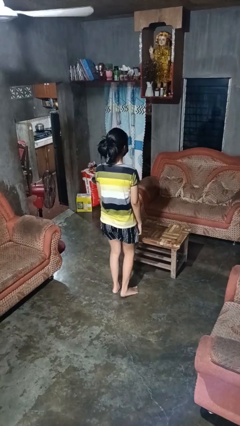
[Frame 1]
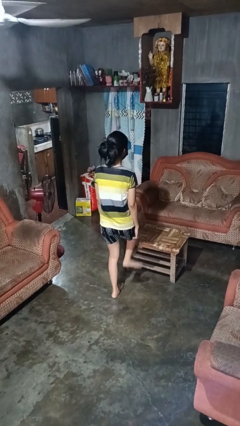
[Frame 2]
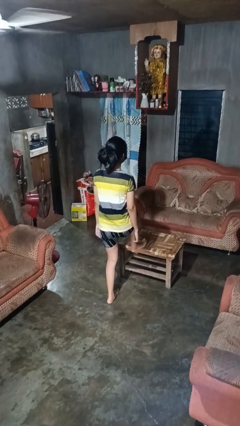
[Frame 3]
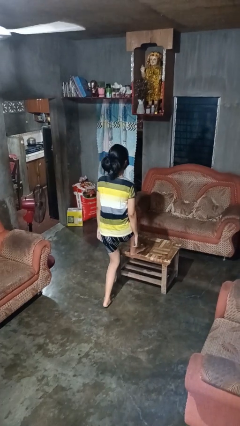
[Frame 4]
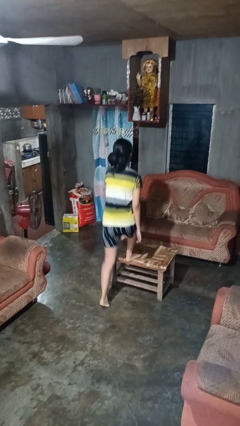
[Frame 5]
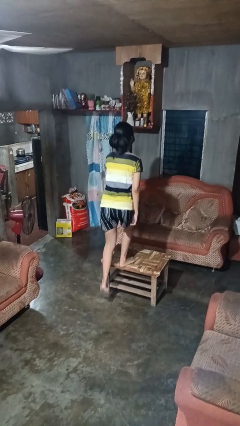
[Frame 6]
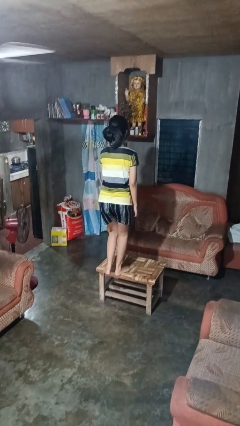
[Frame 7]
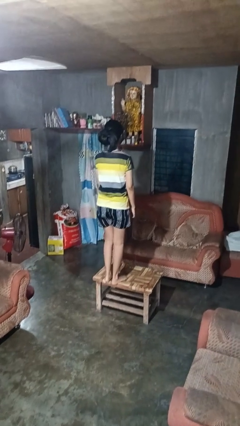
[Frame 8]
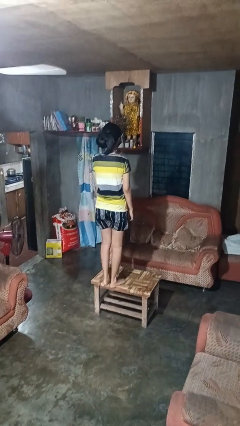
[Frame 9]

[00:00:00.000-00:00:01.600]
person climbs on table

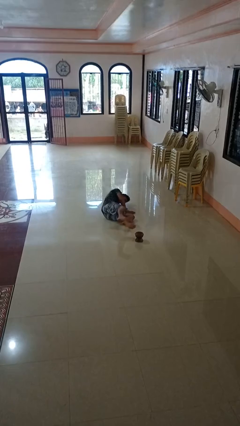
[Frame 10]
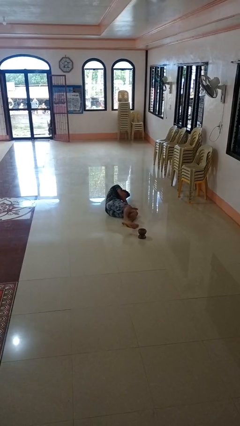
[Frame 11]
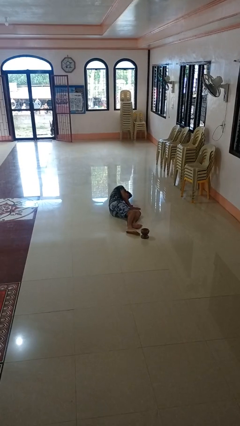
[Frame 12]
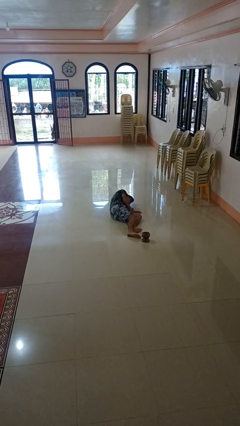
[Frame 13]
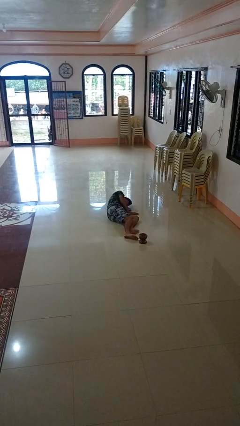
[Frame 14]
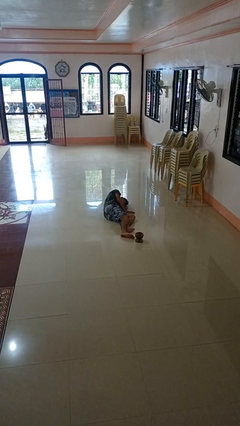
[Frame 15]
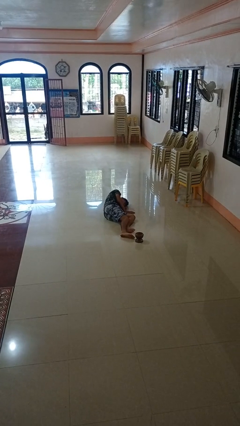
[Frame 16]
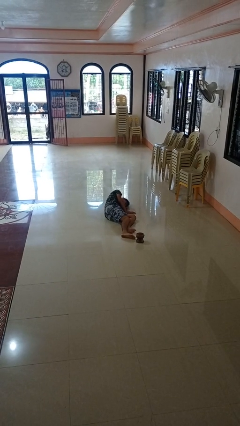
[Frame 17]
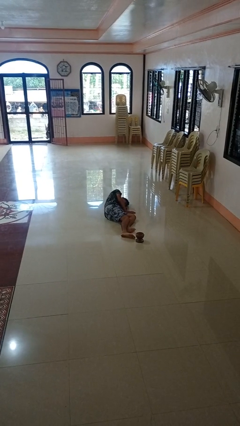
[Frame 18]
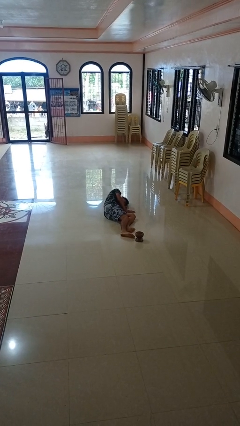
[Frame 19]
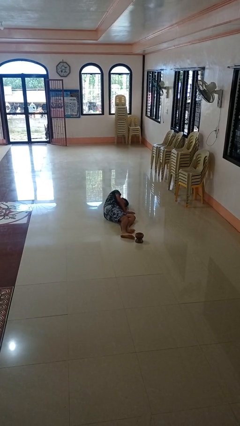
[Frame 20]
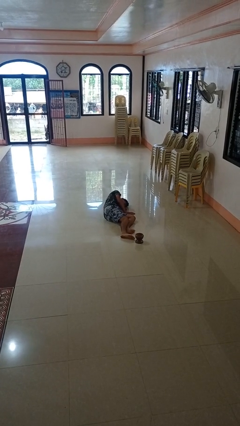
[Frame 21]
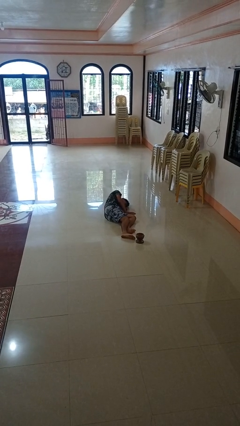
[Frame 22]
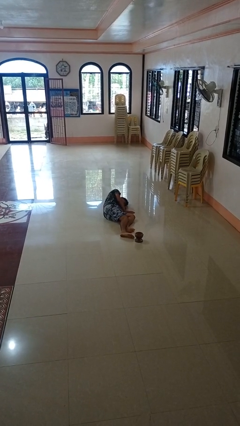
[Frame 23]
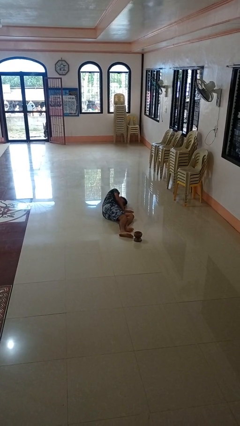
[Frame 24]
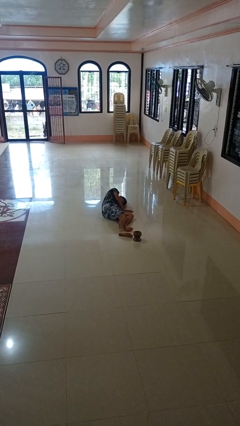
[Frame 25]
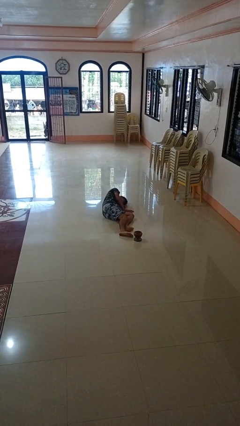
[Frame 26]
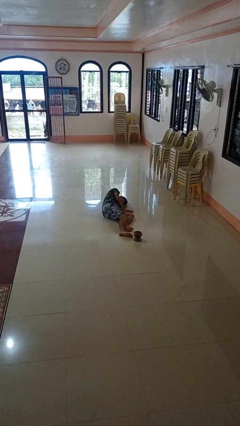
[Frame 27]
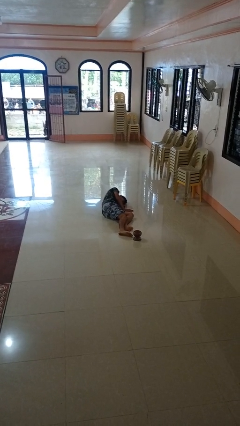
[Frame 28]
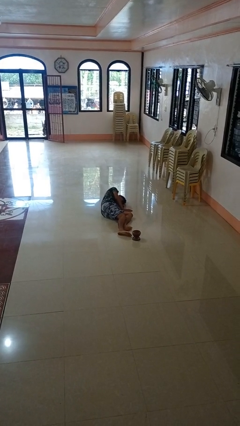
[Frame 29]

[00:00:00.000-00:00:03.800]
person lies down on floor

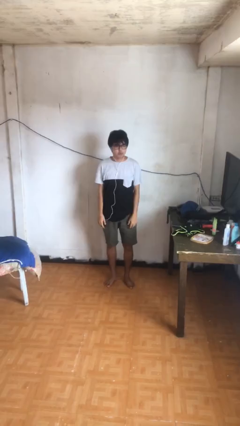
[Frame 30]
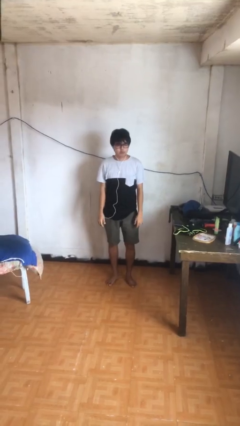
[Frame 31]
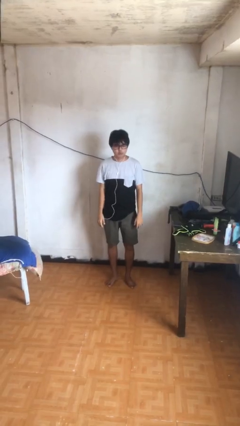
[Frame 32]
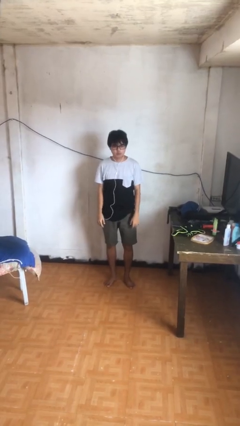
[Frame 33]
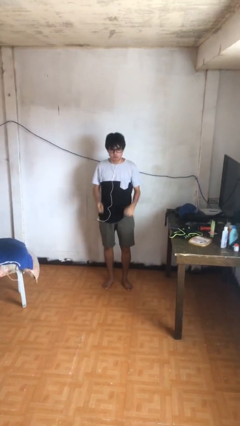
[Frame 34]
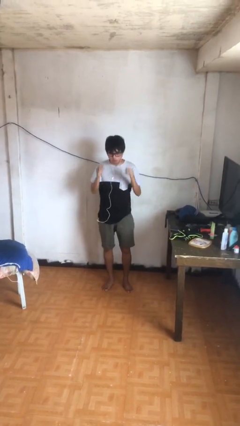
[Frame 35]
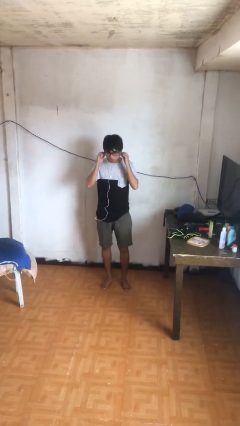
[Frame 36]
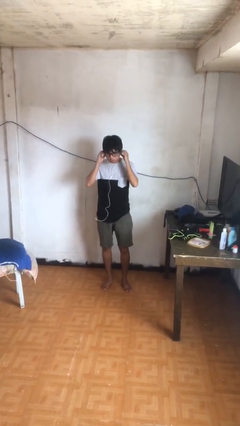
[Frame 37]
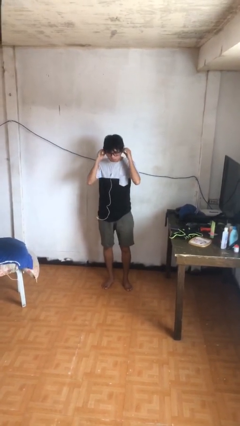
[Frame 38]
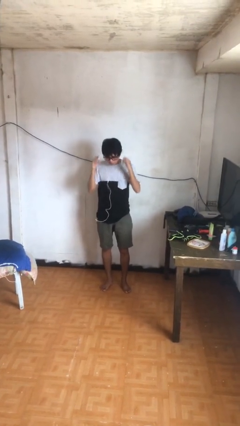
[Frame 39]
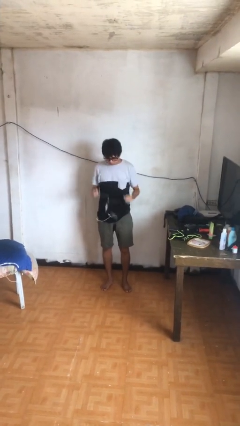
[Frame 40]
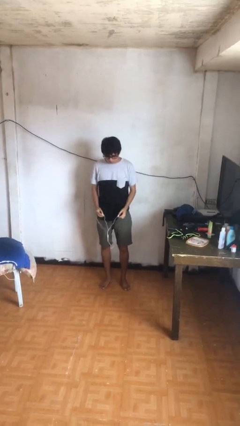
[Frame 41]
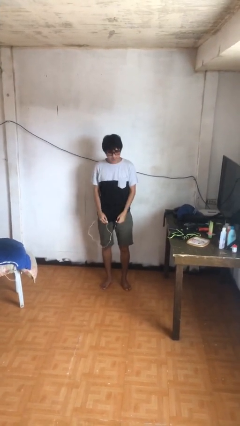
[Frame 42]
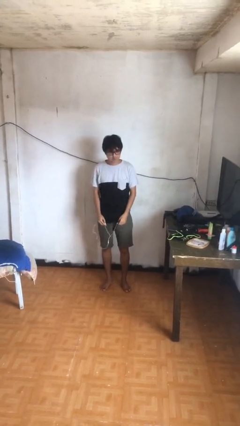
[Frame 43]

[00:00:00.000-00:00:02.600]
person takes off headphones

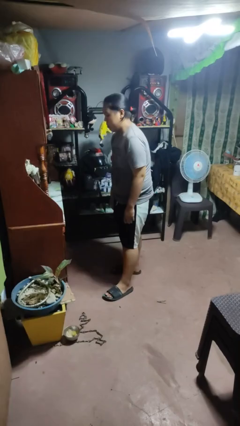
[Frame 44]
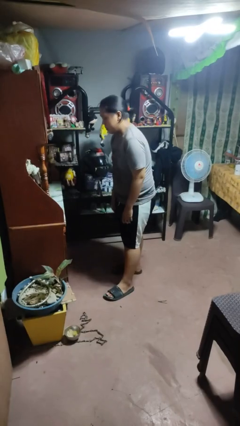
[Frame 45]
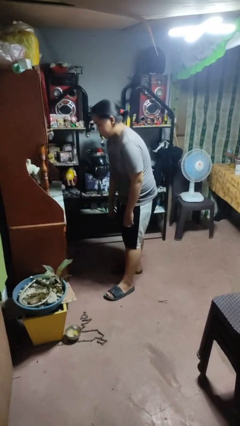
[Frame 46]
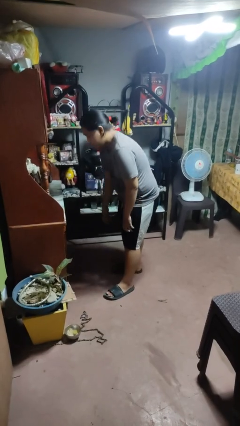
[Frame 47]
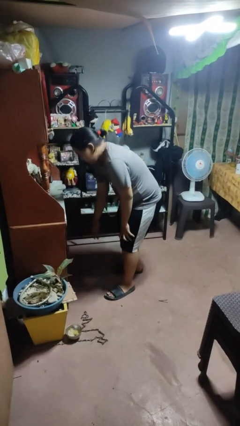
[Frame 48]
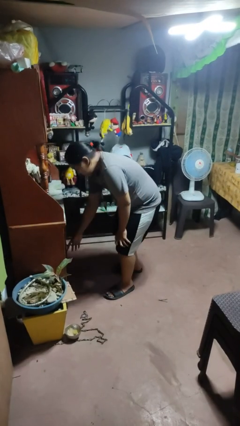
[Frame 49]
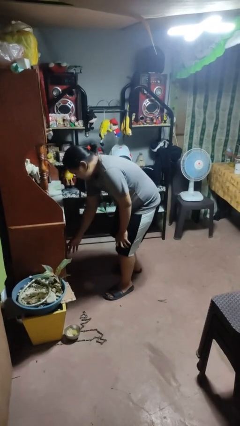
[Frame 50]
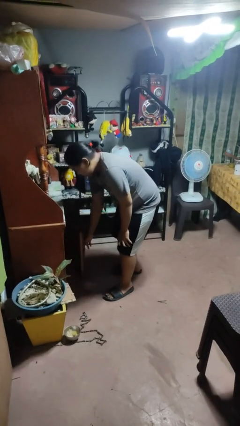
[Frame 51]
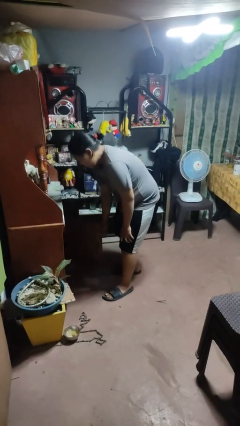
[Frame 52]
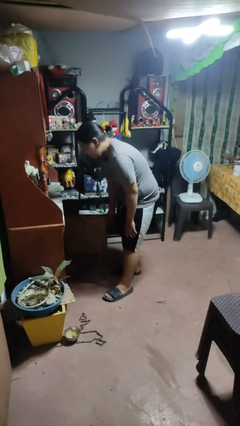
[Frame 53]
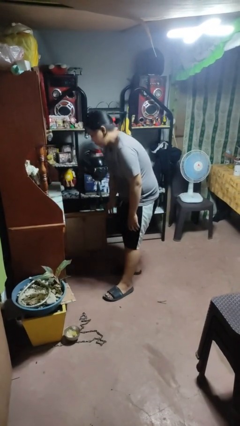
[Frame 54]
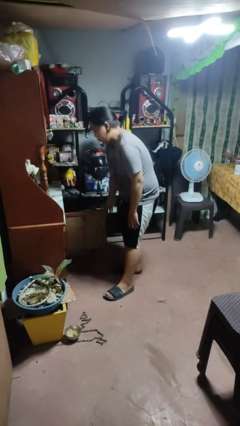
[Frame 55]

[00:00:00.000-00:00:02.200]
person opens cabinet

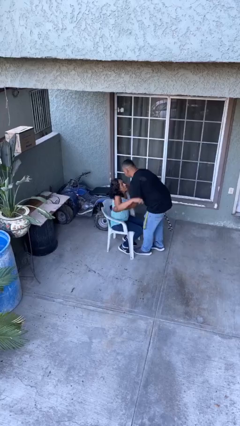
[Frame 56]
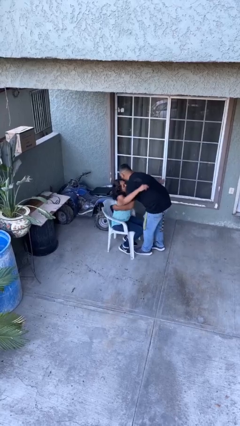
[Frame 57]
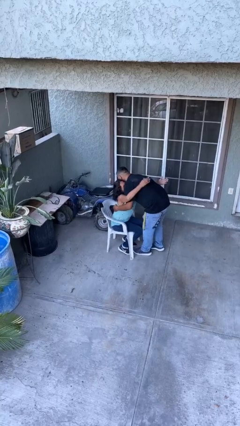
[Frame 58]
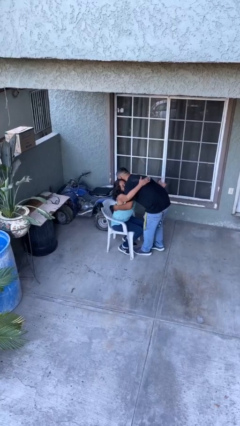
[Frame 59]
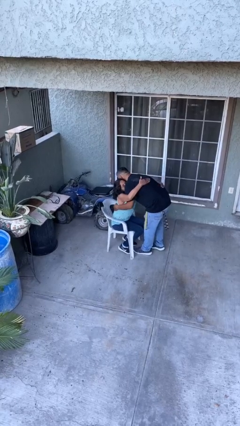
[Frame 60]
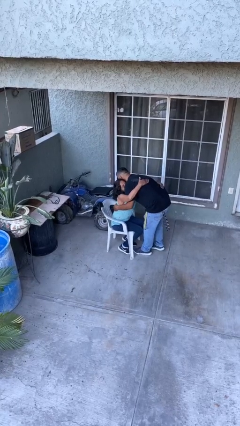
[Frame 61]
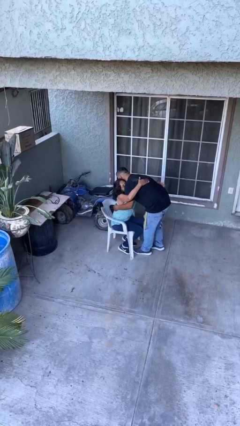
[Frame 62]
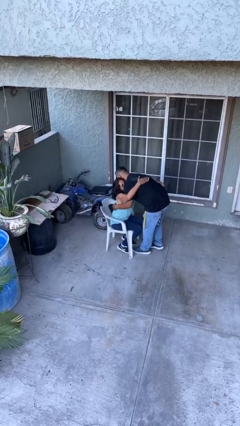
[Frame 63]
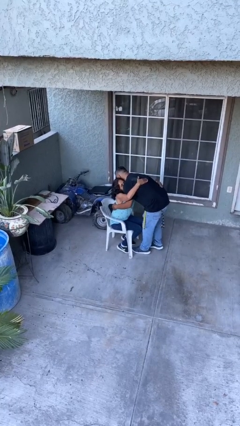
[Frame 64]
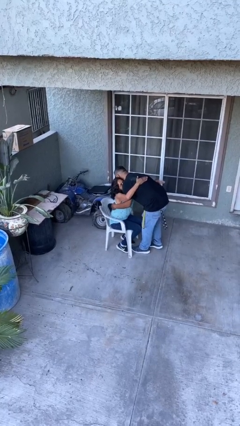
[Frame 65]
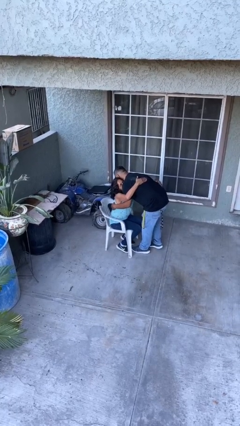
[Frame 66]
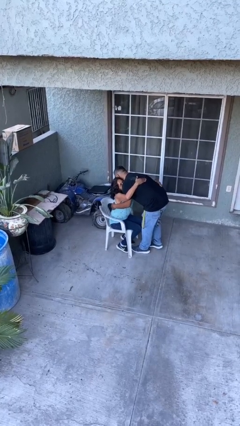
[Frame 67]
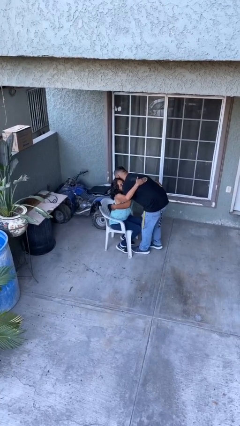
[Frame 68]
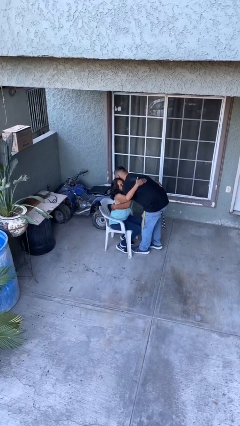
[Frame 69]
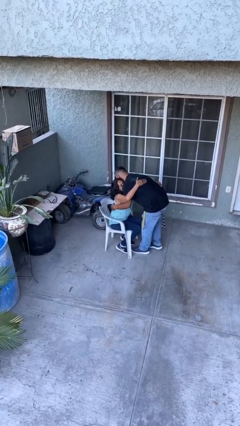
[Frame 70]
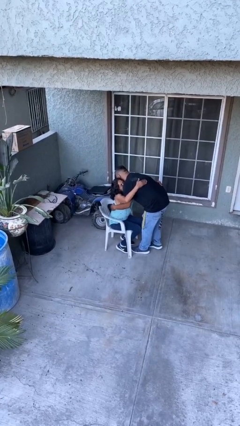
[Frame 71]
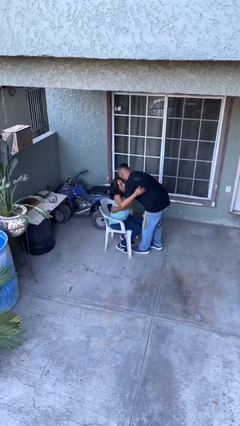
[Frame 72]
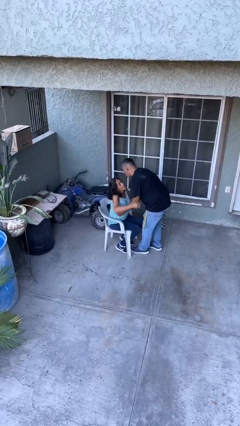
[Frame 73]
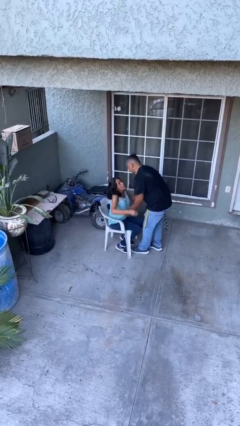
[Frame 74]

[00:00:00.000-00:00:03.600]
person embraces person

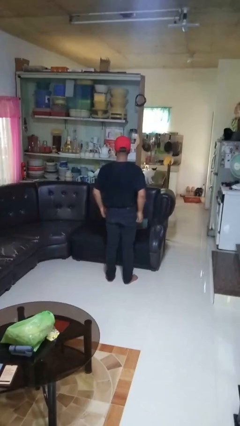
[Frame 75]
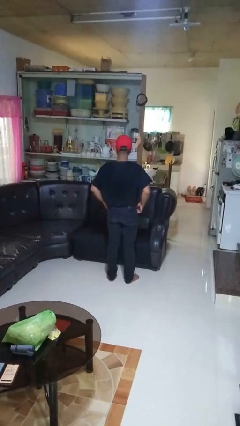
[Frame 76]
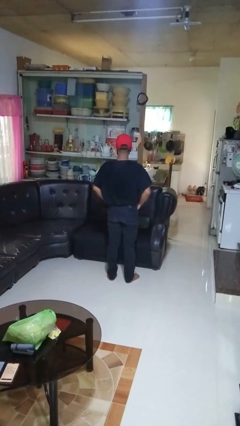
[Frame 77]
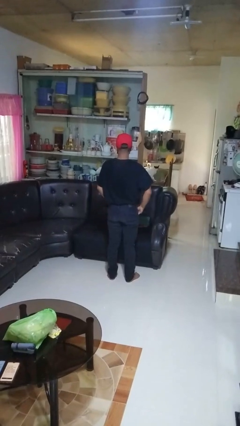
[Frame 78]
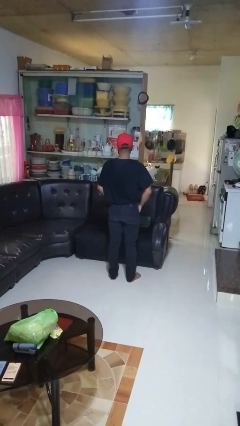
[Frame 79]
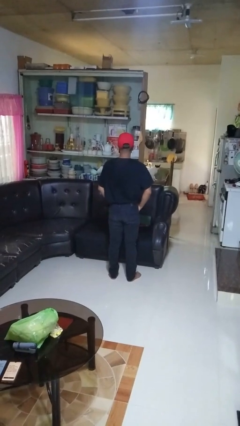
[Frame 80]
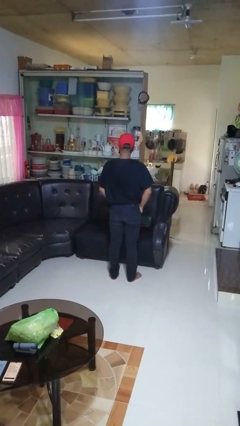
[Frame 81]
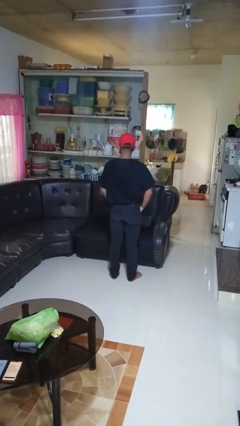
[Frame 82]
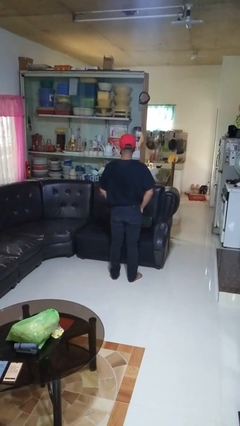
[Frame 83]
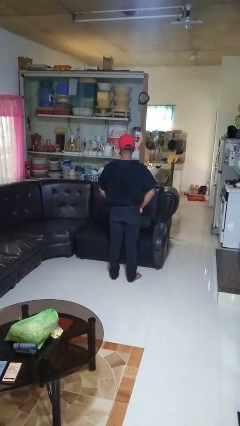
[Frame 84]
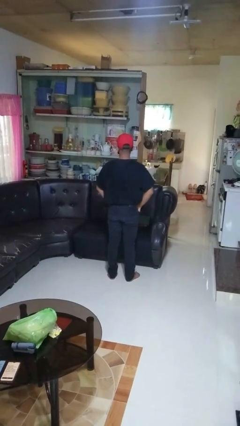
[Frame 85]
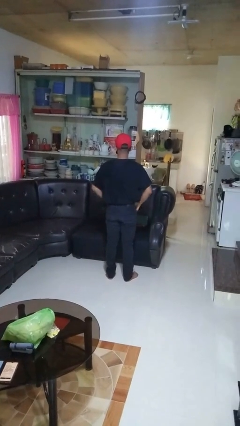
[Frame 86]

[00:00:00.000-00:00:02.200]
person puts hands in back pockets

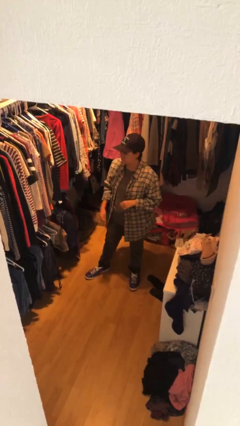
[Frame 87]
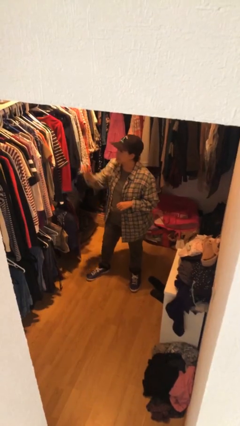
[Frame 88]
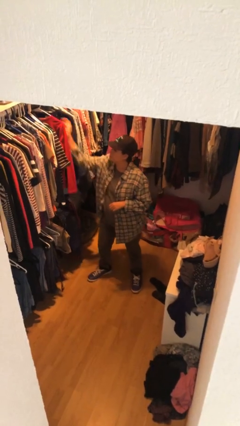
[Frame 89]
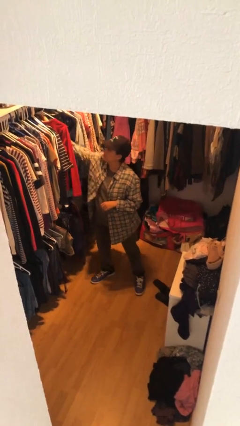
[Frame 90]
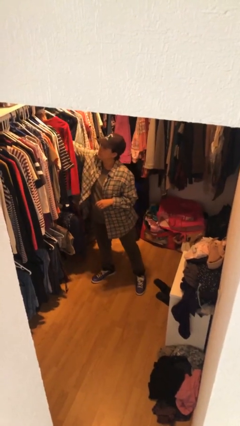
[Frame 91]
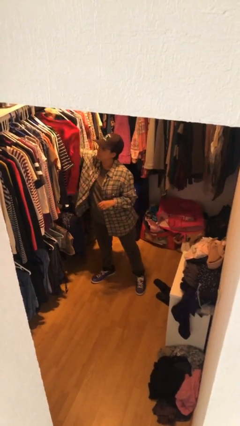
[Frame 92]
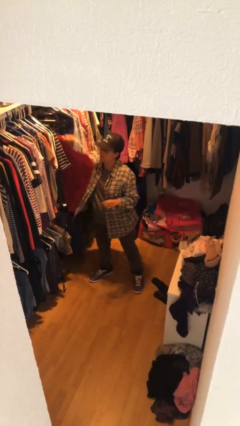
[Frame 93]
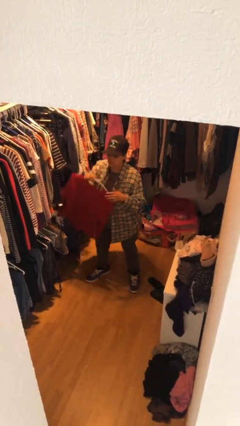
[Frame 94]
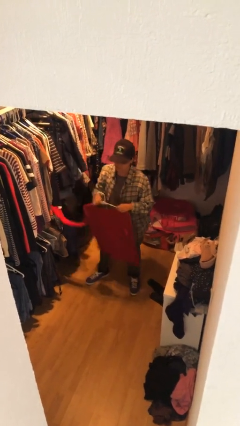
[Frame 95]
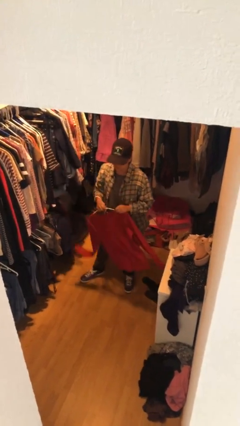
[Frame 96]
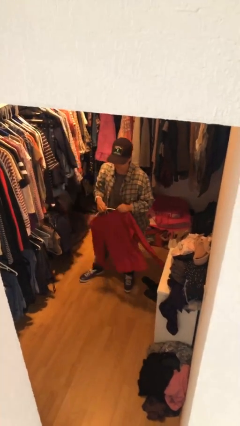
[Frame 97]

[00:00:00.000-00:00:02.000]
person takes clothes from closet
